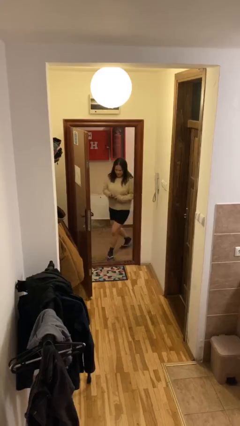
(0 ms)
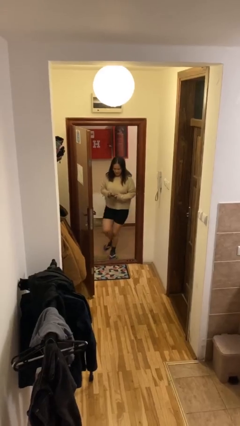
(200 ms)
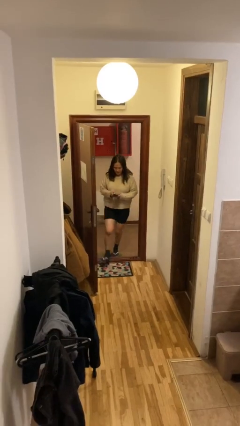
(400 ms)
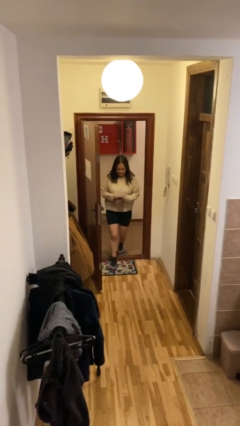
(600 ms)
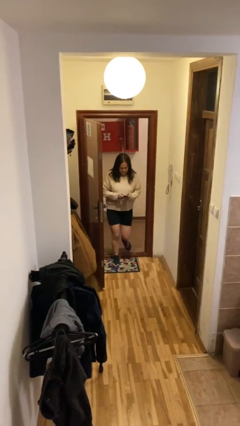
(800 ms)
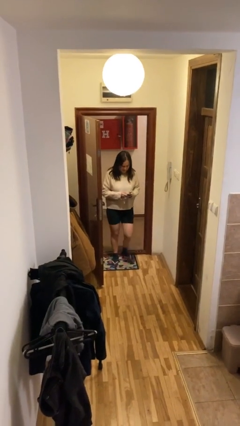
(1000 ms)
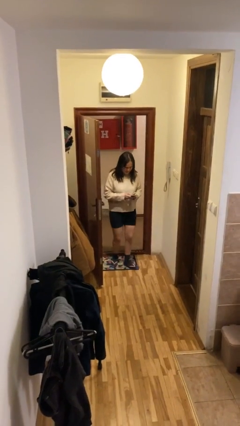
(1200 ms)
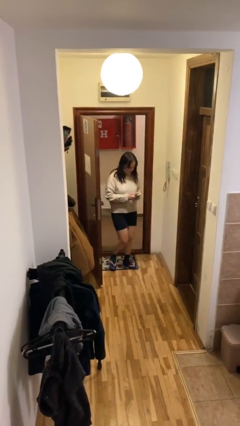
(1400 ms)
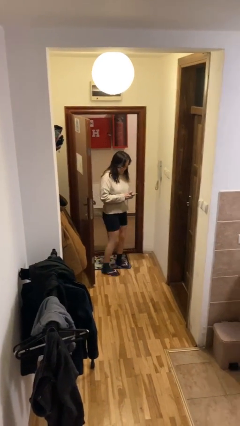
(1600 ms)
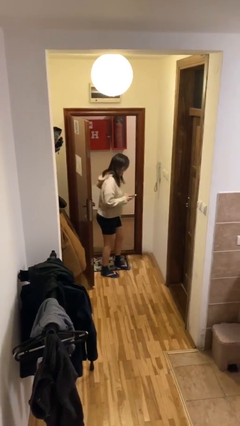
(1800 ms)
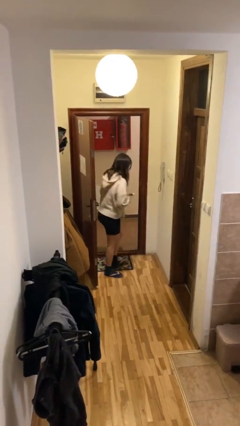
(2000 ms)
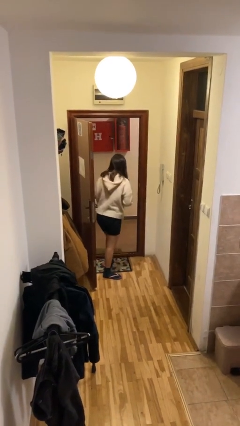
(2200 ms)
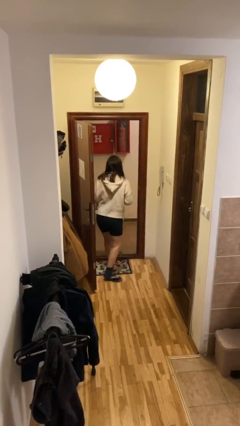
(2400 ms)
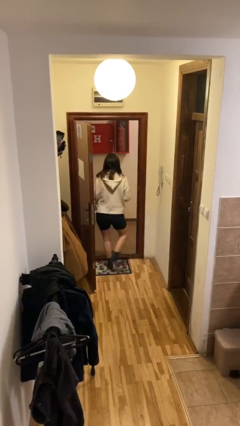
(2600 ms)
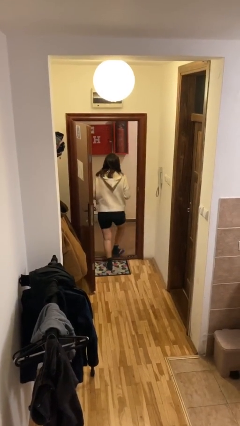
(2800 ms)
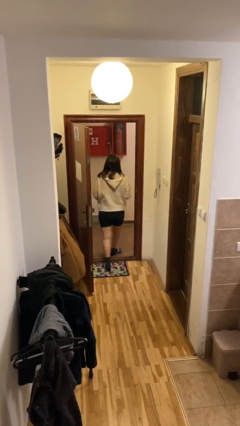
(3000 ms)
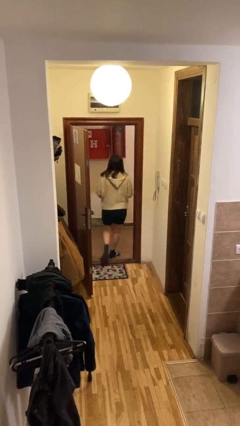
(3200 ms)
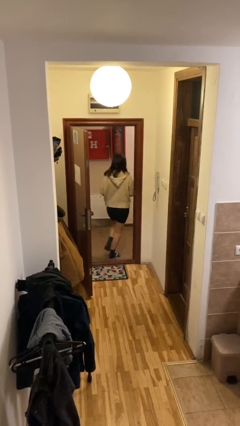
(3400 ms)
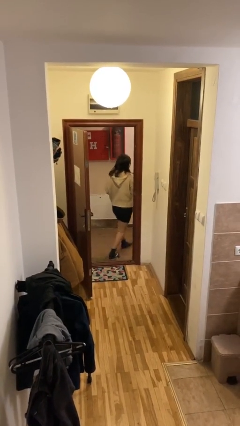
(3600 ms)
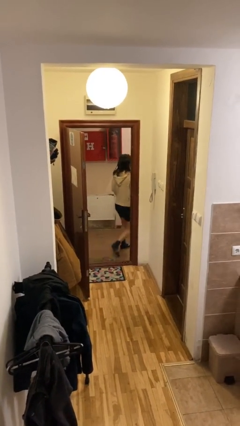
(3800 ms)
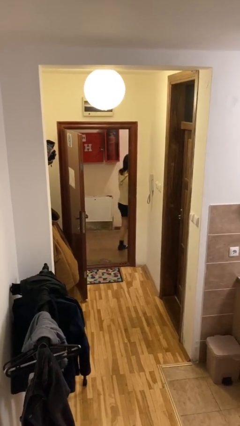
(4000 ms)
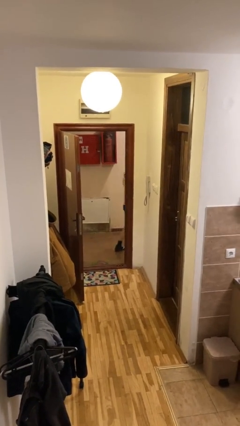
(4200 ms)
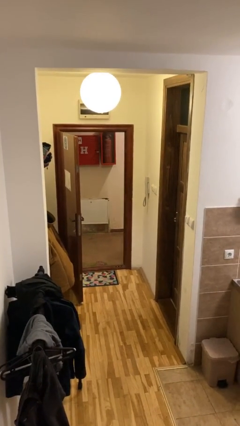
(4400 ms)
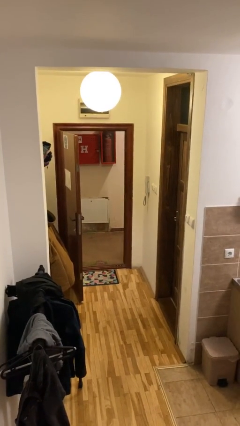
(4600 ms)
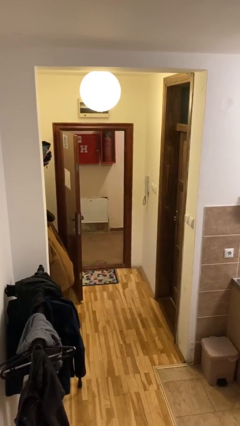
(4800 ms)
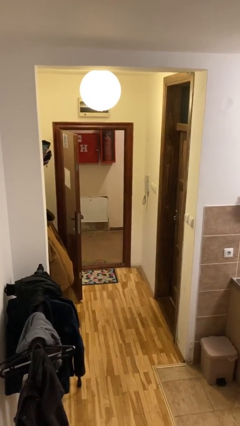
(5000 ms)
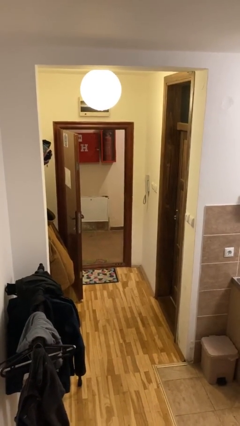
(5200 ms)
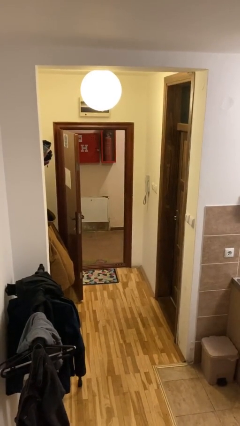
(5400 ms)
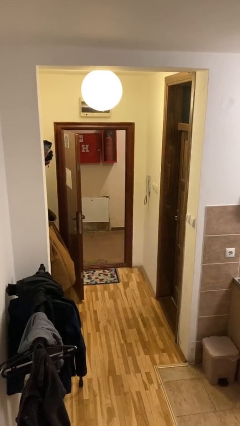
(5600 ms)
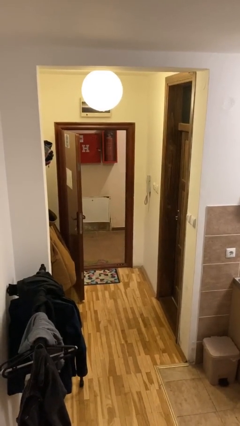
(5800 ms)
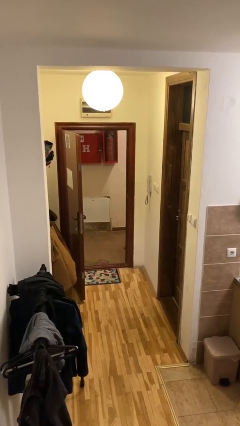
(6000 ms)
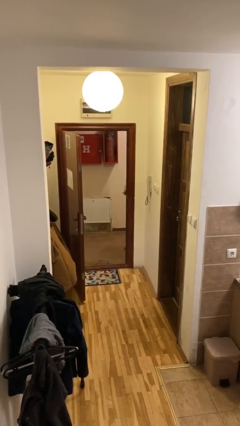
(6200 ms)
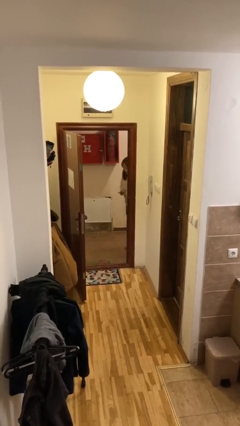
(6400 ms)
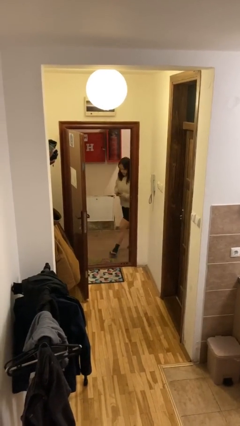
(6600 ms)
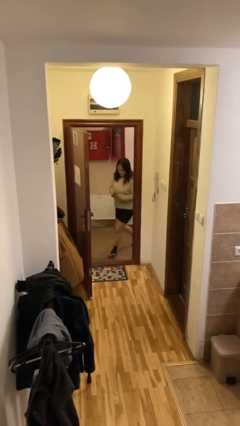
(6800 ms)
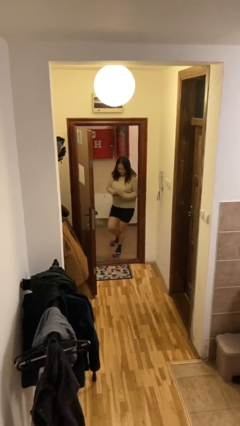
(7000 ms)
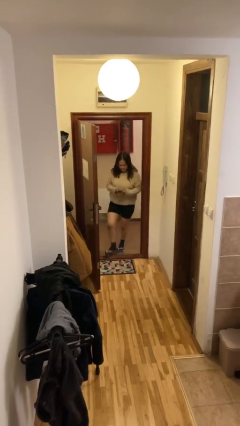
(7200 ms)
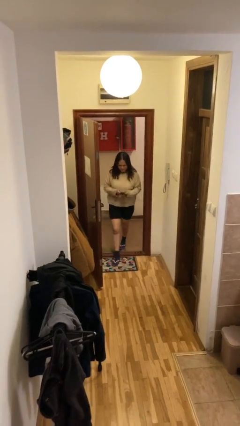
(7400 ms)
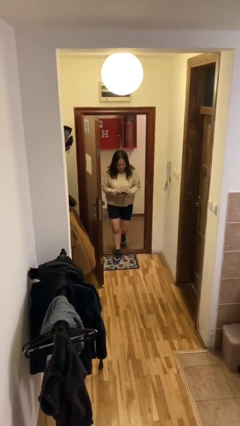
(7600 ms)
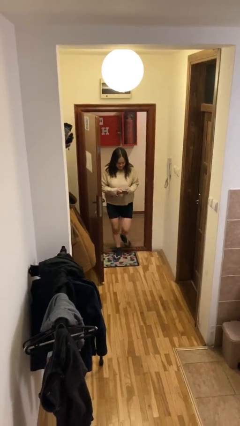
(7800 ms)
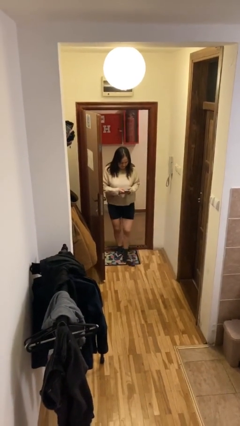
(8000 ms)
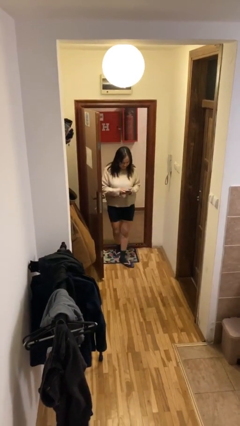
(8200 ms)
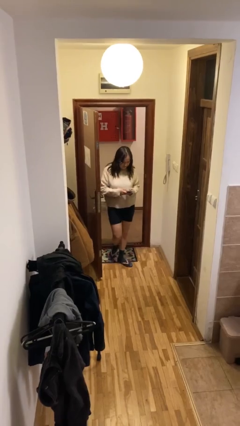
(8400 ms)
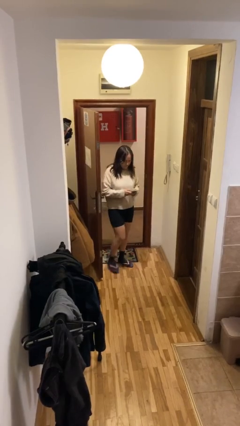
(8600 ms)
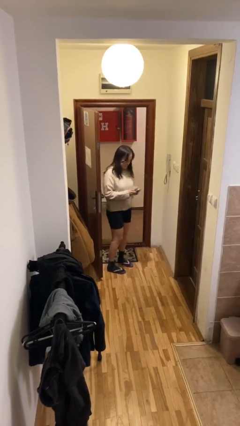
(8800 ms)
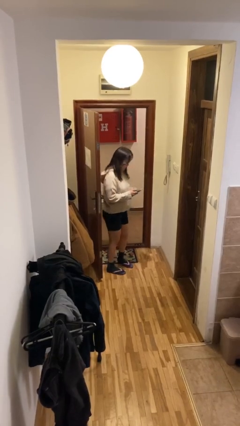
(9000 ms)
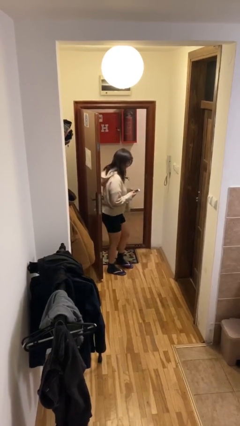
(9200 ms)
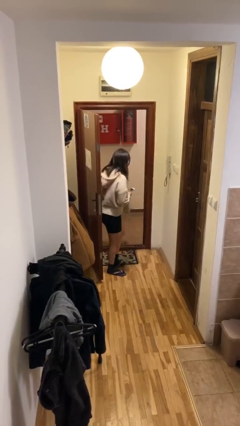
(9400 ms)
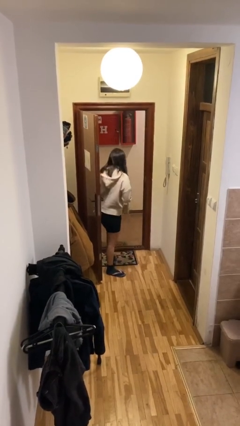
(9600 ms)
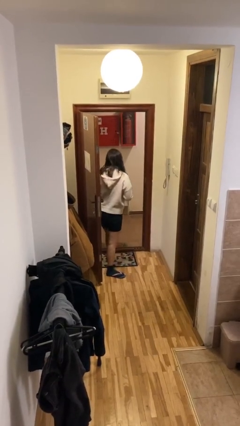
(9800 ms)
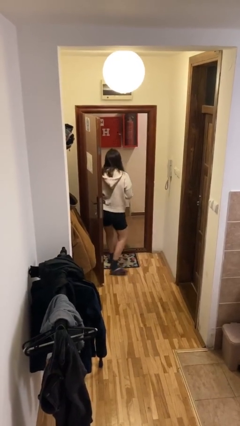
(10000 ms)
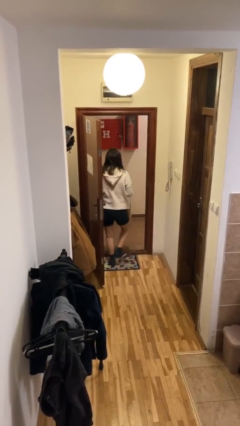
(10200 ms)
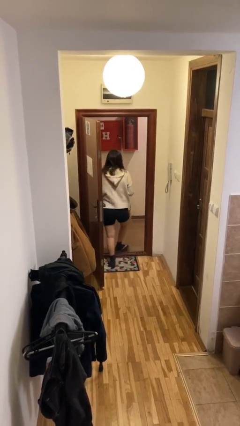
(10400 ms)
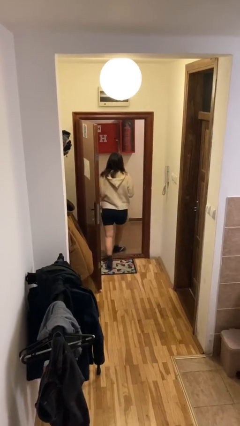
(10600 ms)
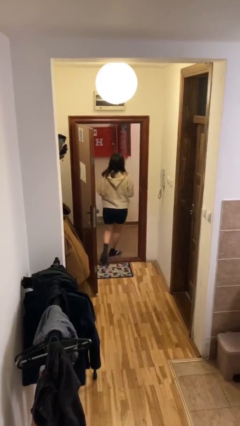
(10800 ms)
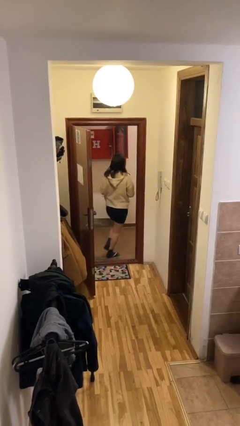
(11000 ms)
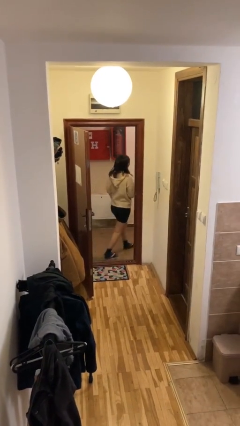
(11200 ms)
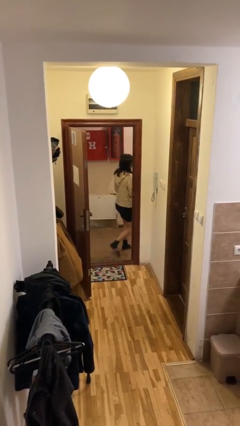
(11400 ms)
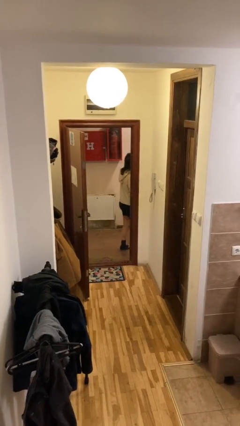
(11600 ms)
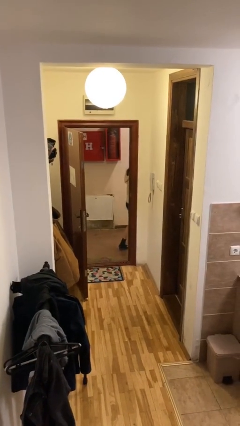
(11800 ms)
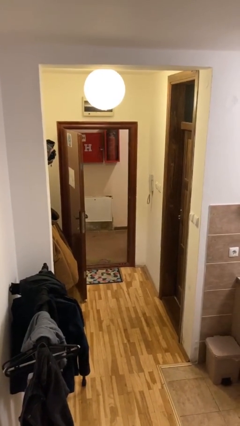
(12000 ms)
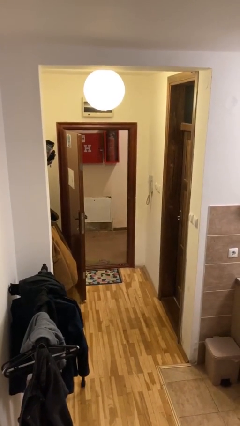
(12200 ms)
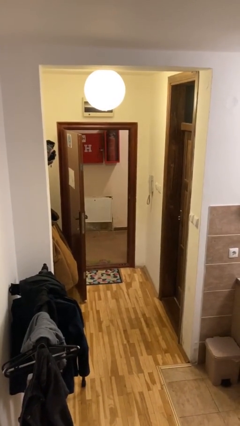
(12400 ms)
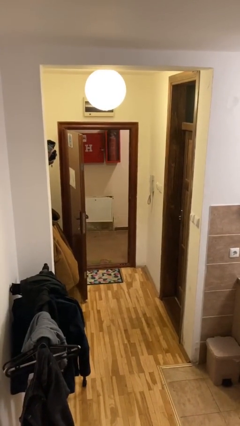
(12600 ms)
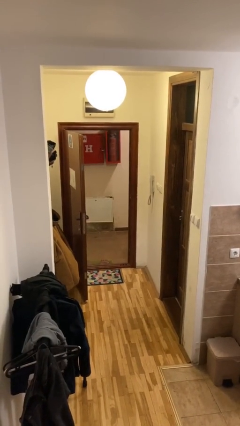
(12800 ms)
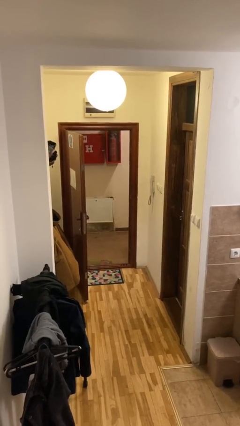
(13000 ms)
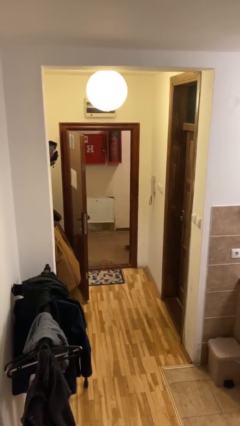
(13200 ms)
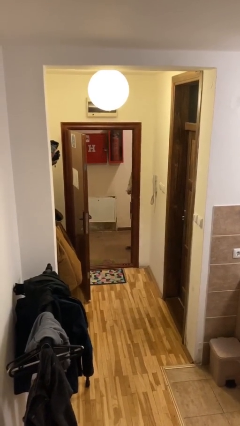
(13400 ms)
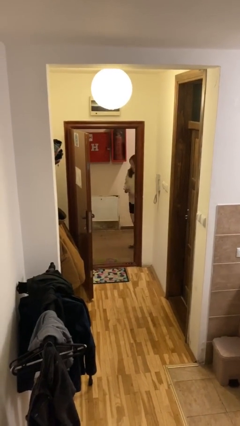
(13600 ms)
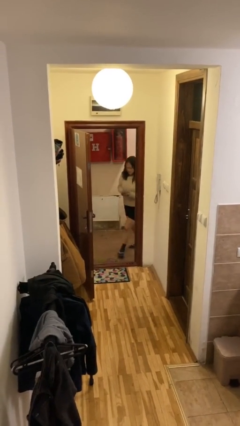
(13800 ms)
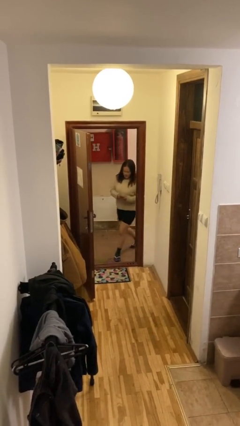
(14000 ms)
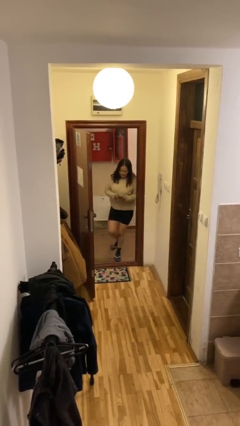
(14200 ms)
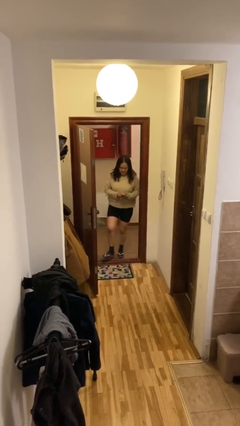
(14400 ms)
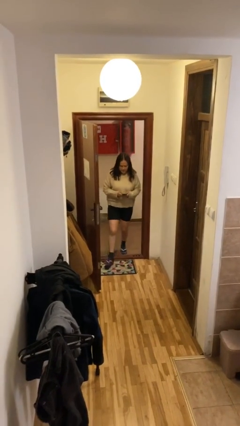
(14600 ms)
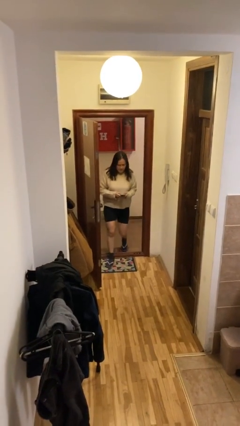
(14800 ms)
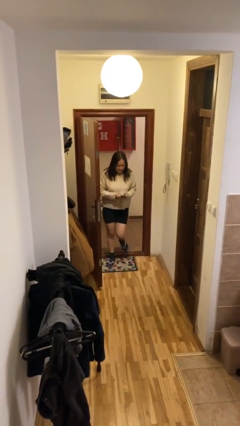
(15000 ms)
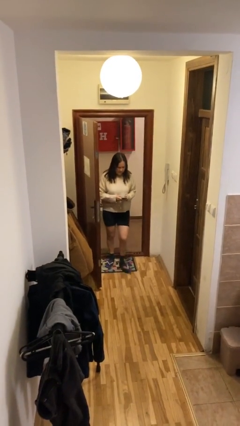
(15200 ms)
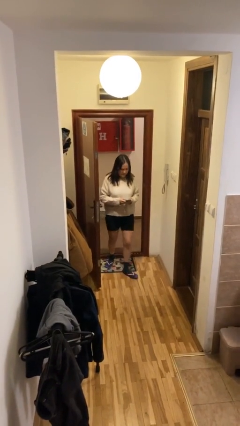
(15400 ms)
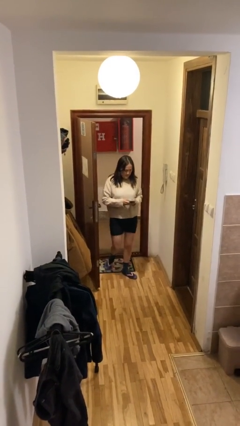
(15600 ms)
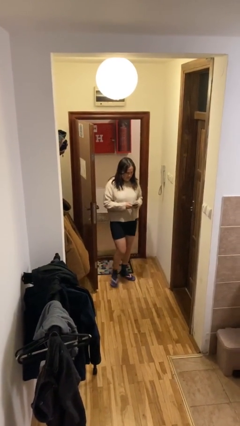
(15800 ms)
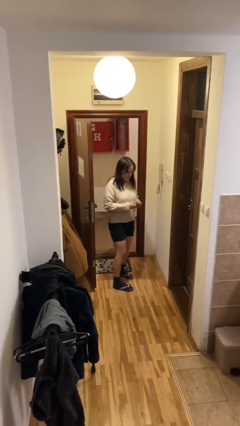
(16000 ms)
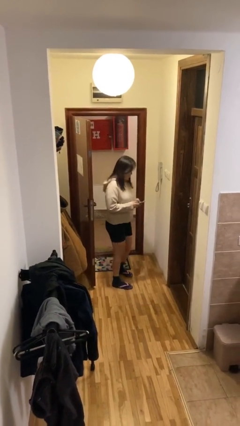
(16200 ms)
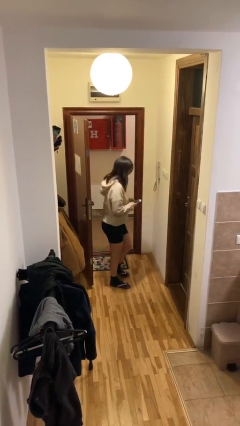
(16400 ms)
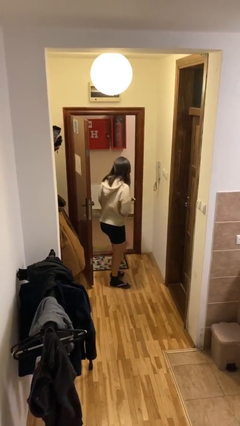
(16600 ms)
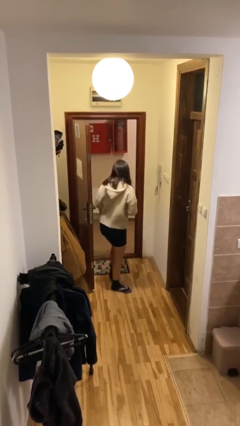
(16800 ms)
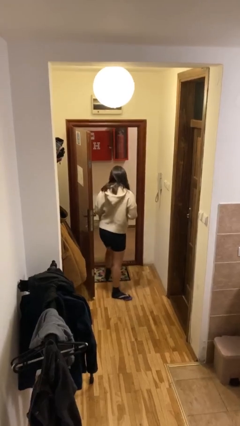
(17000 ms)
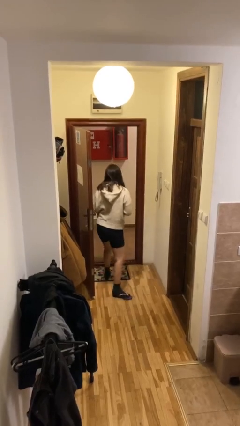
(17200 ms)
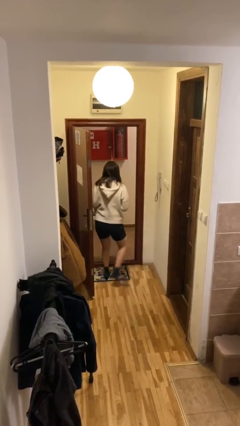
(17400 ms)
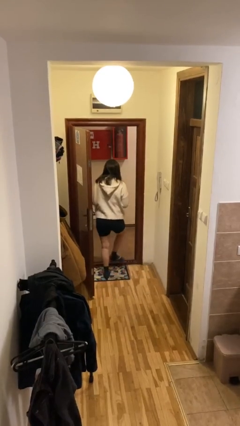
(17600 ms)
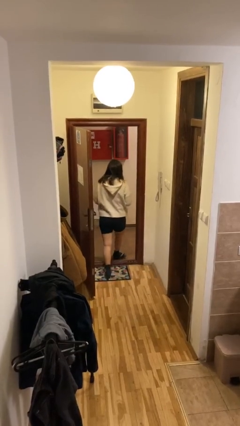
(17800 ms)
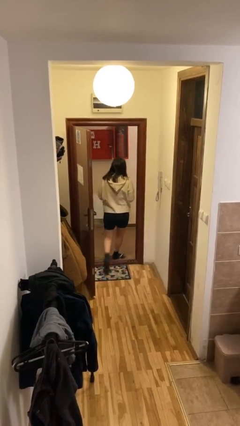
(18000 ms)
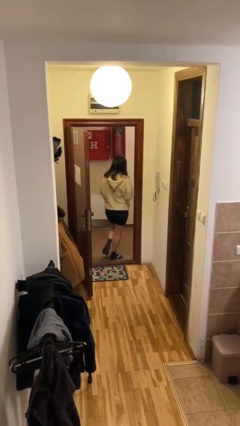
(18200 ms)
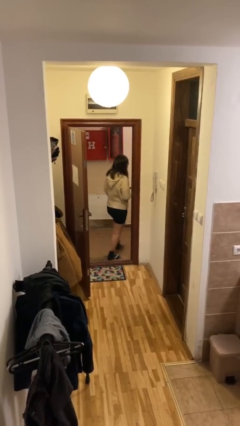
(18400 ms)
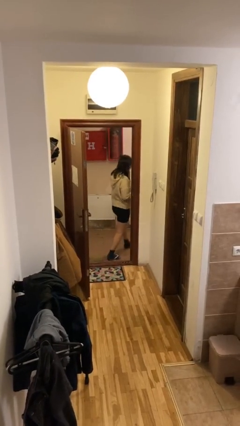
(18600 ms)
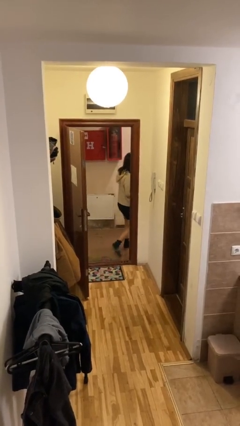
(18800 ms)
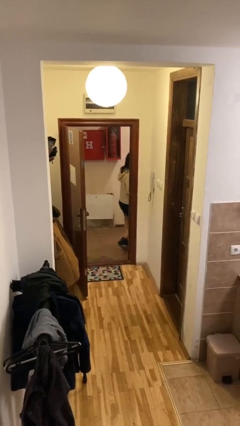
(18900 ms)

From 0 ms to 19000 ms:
person texts on phone
